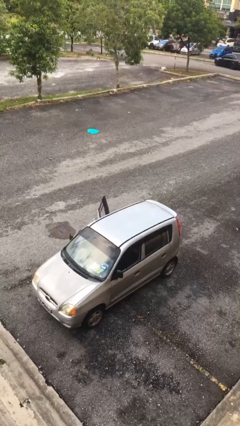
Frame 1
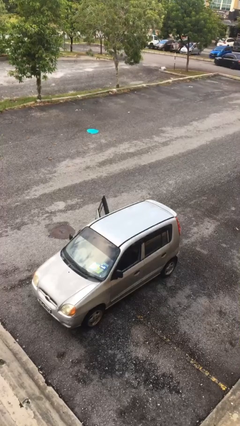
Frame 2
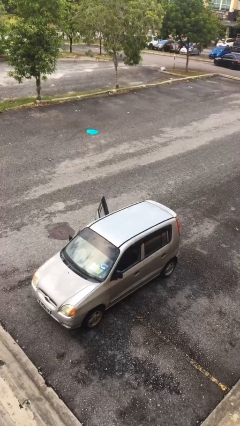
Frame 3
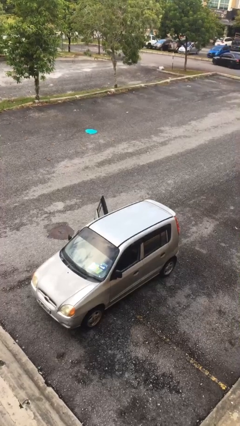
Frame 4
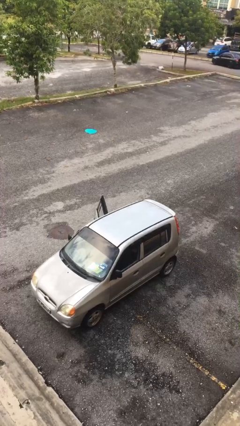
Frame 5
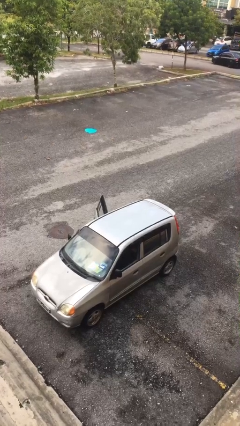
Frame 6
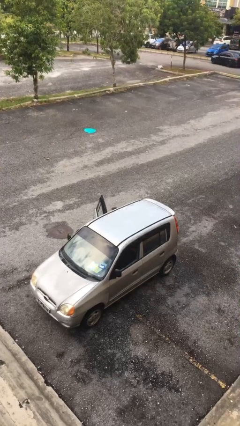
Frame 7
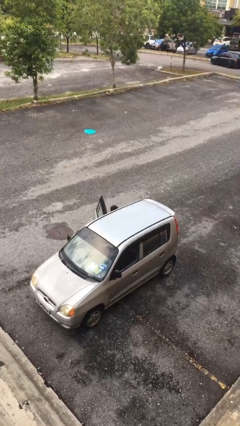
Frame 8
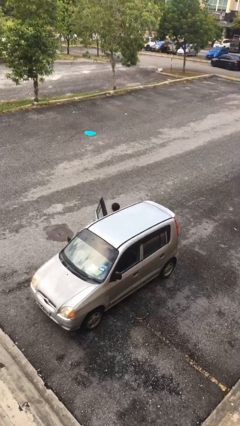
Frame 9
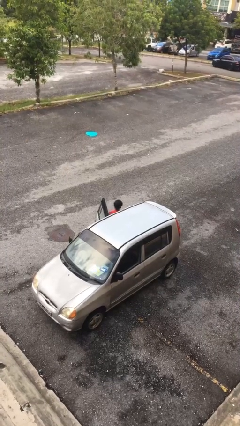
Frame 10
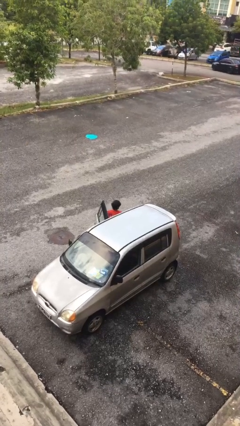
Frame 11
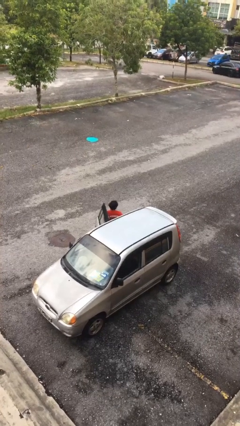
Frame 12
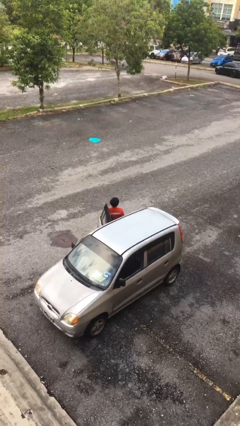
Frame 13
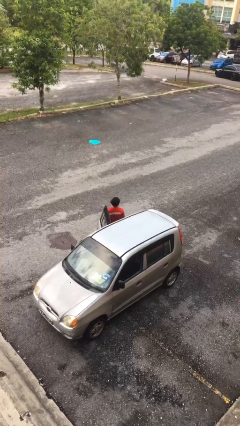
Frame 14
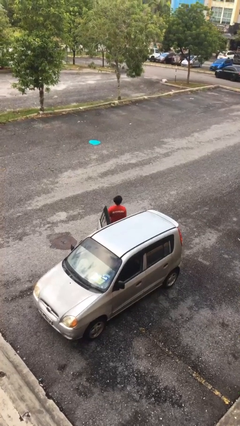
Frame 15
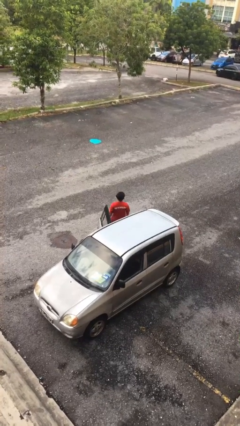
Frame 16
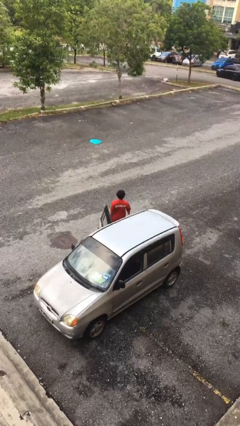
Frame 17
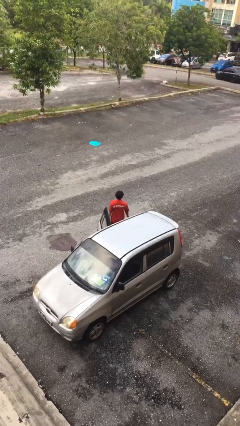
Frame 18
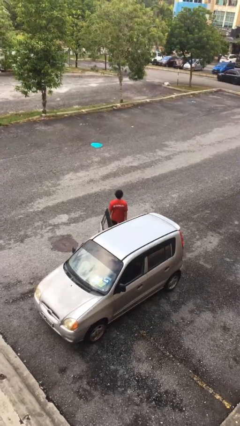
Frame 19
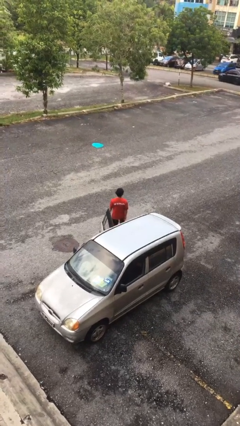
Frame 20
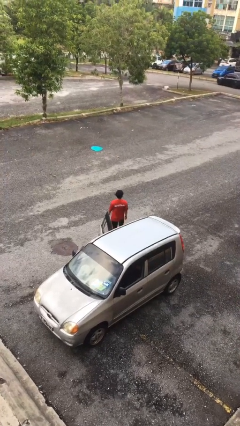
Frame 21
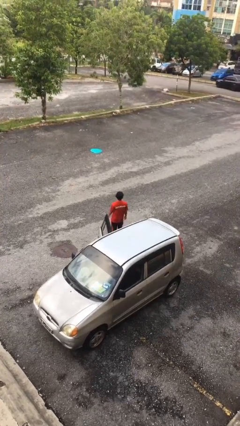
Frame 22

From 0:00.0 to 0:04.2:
person exits car

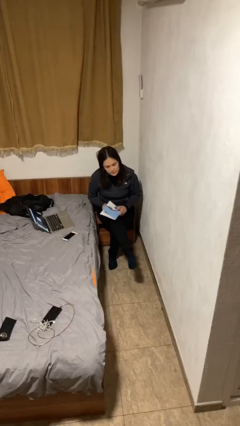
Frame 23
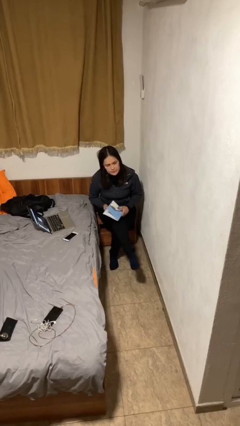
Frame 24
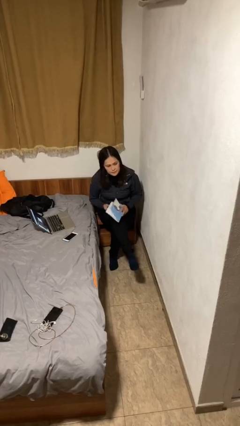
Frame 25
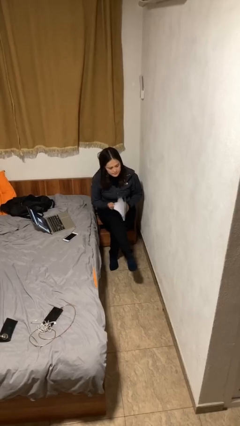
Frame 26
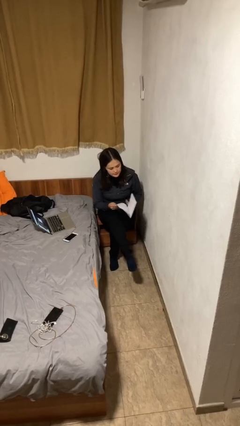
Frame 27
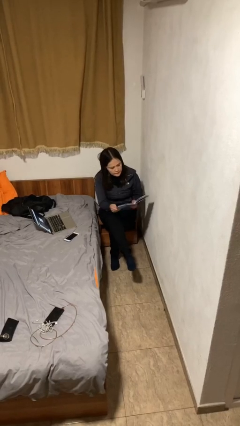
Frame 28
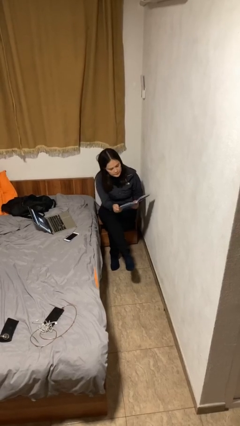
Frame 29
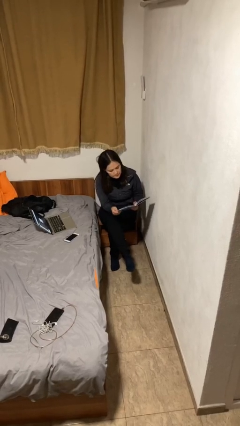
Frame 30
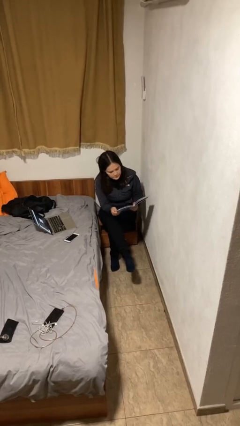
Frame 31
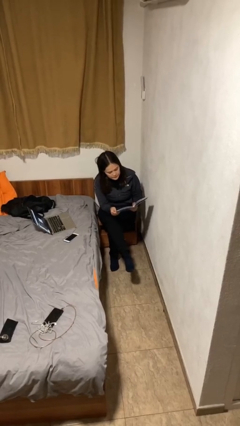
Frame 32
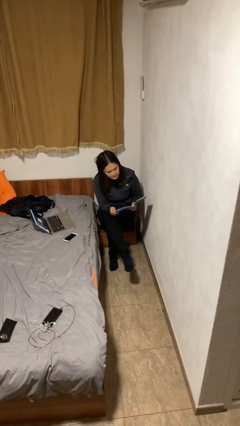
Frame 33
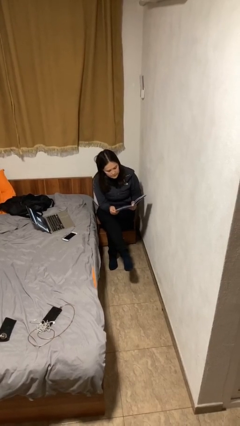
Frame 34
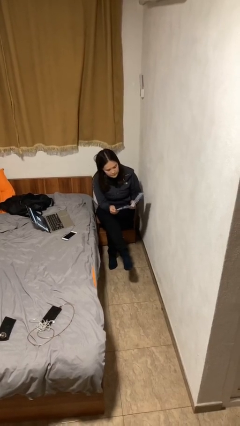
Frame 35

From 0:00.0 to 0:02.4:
person reads document

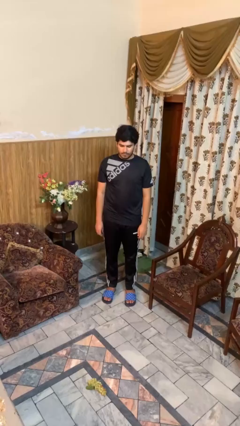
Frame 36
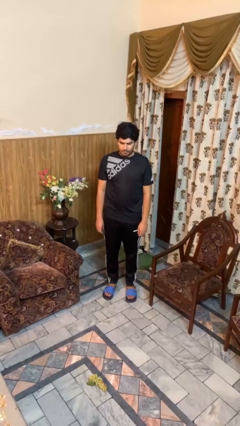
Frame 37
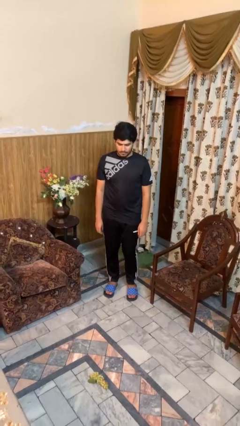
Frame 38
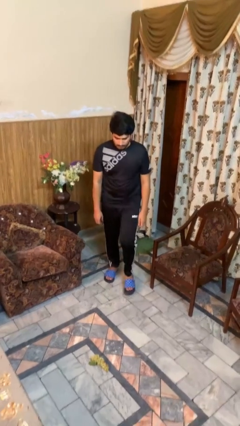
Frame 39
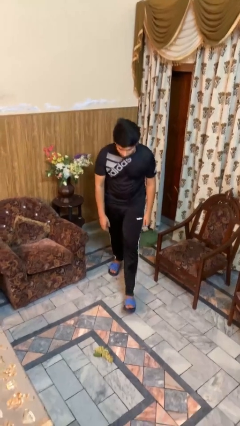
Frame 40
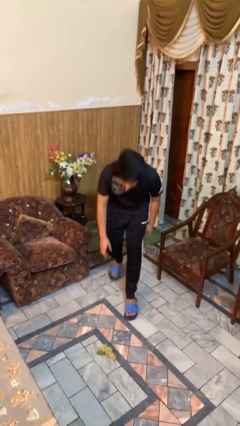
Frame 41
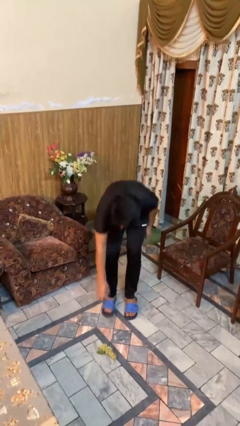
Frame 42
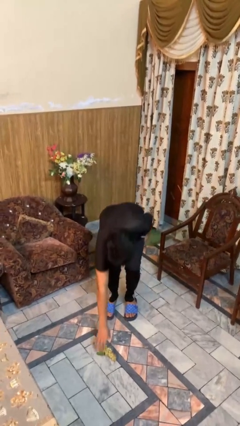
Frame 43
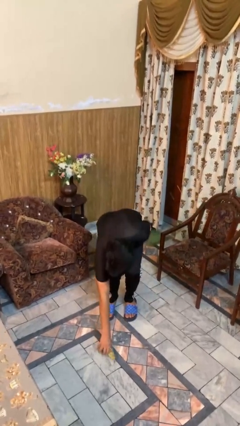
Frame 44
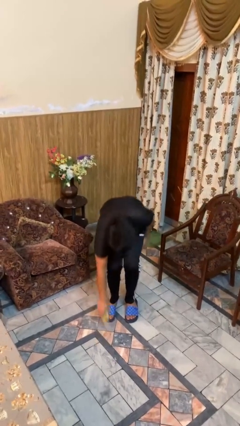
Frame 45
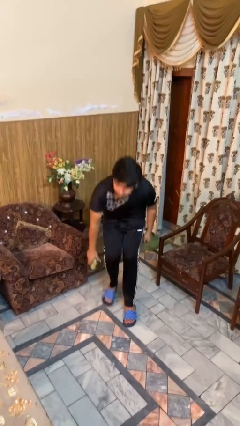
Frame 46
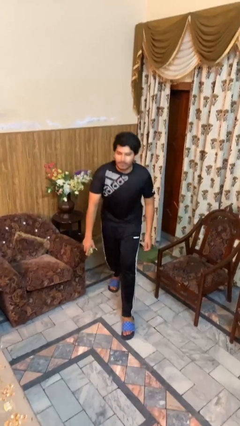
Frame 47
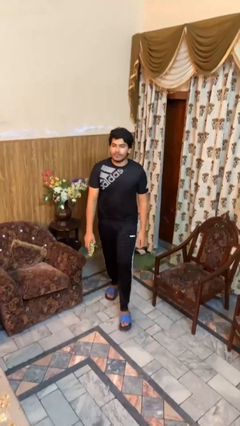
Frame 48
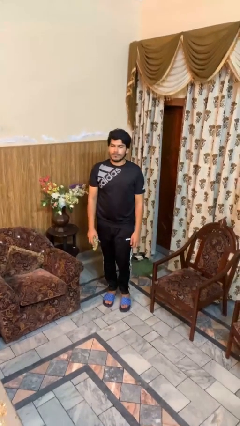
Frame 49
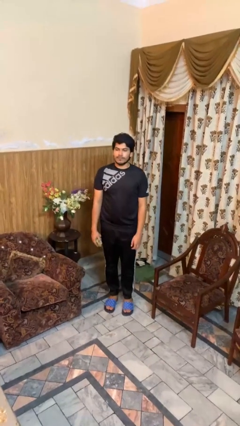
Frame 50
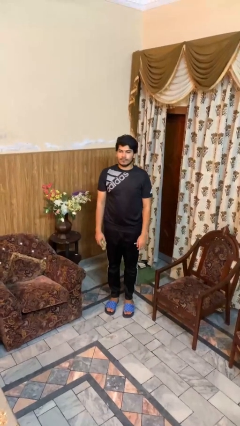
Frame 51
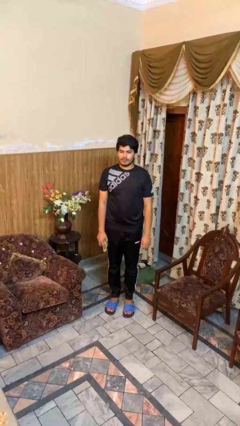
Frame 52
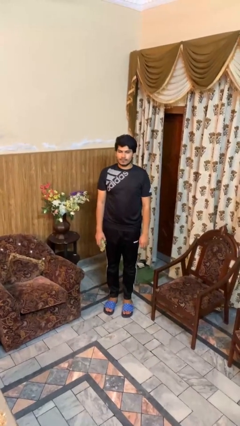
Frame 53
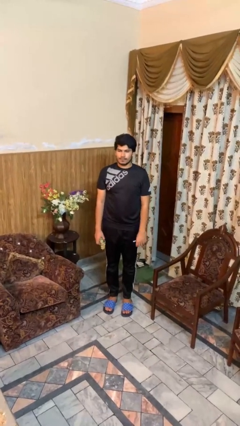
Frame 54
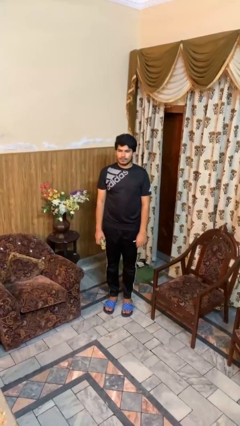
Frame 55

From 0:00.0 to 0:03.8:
person picks up object from floor

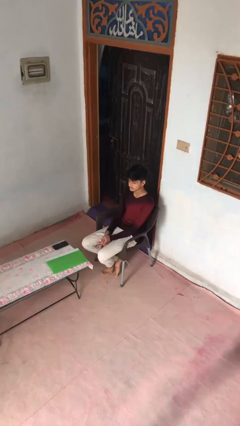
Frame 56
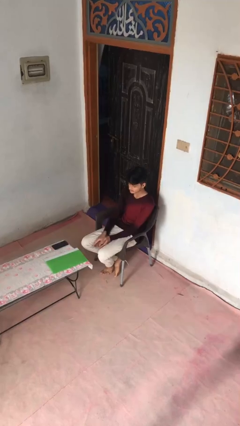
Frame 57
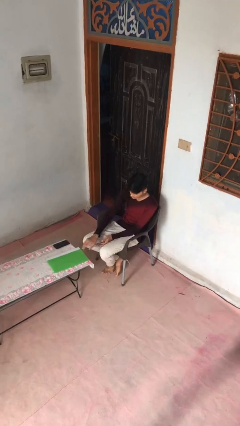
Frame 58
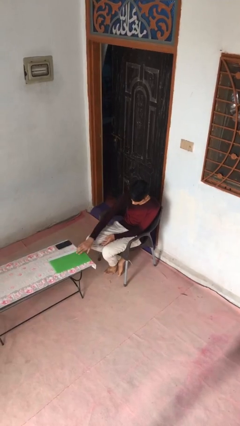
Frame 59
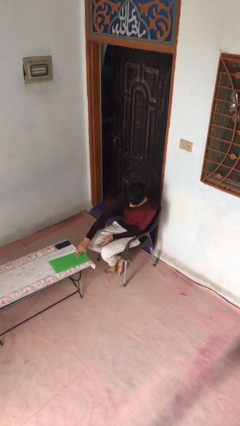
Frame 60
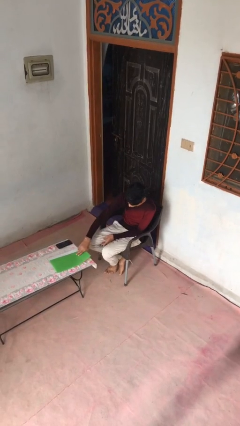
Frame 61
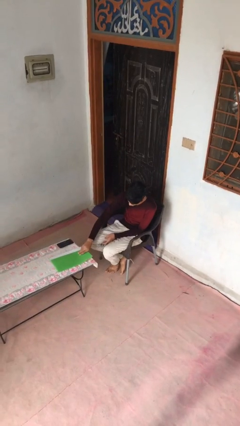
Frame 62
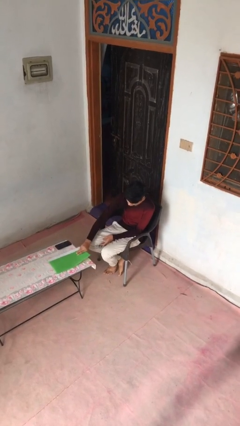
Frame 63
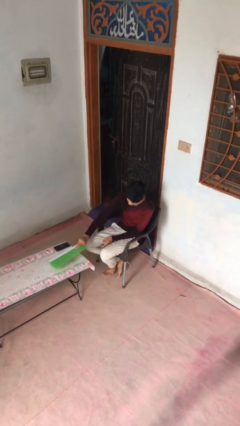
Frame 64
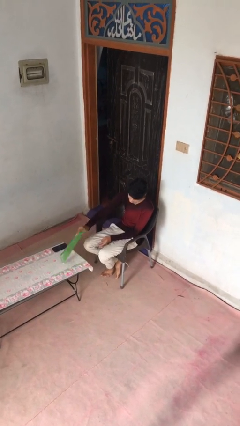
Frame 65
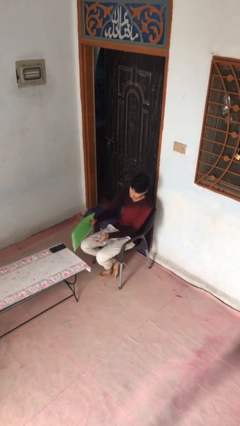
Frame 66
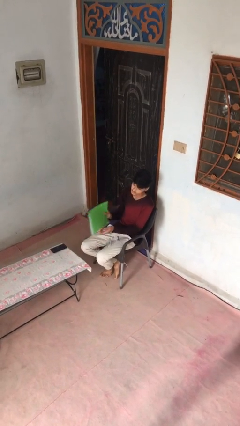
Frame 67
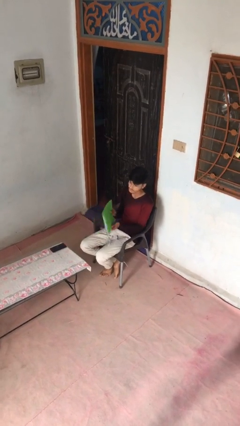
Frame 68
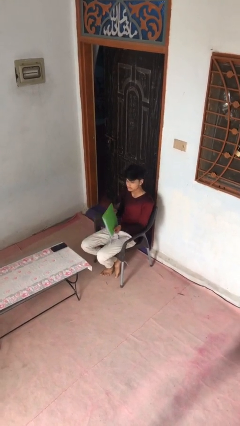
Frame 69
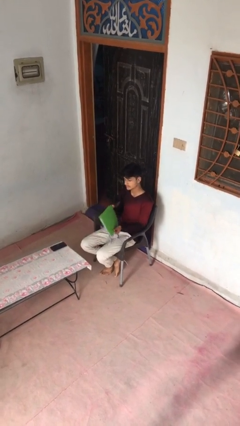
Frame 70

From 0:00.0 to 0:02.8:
person picks up object from table

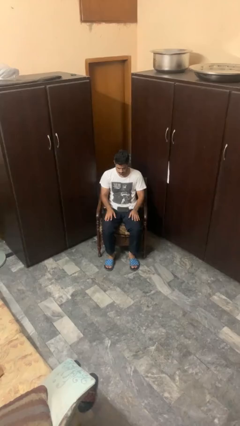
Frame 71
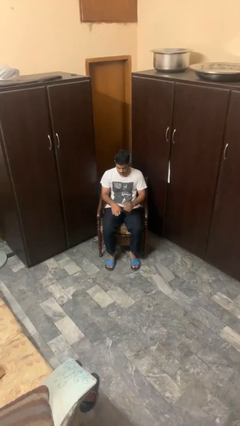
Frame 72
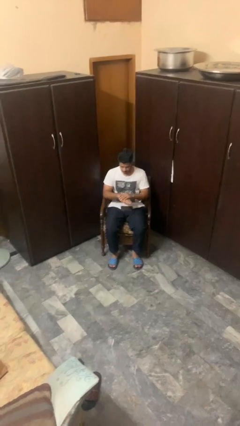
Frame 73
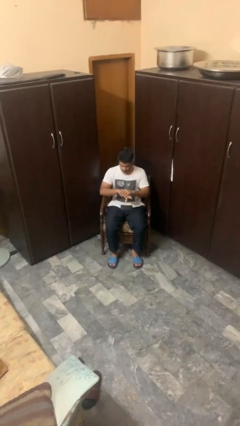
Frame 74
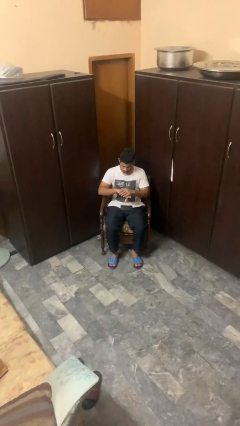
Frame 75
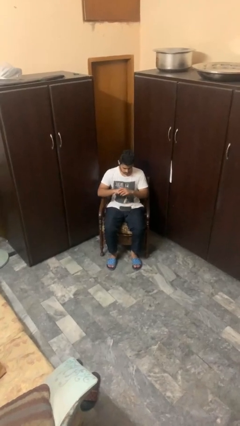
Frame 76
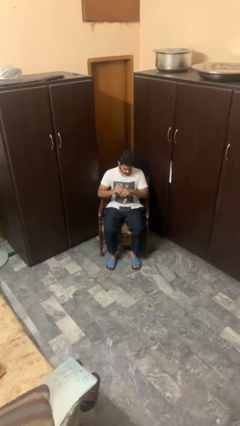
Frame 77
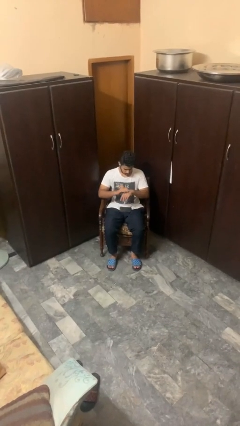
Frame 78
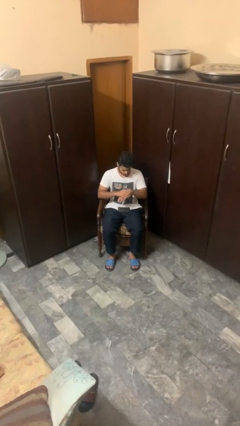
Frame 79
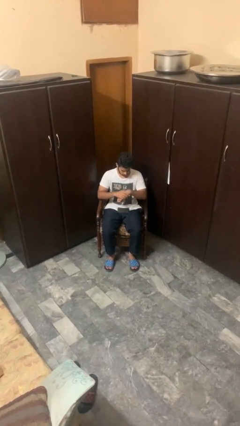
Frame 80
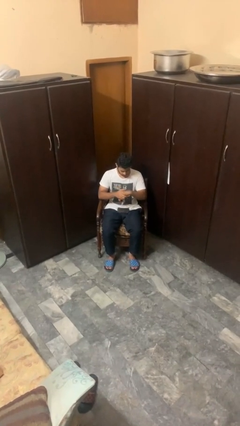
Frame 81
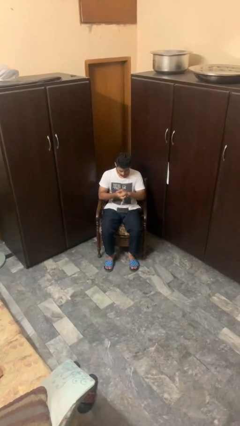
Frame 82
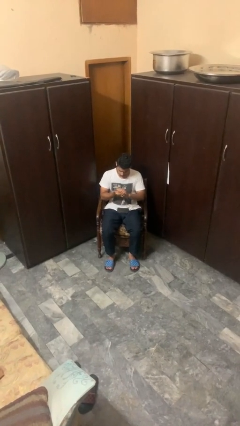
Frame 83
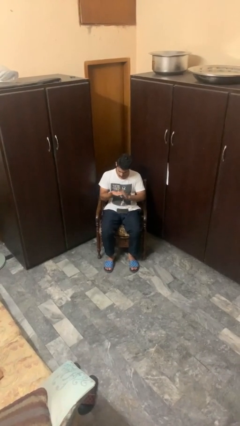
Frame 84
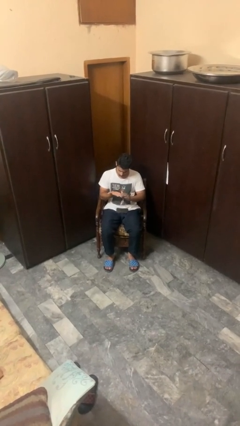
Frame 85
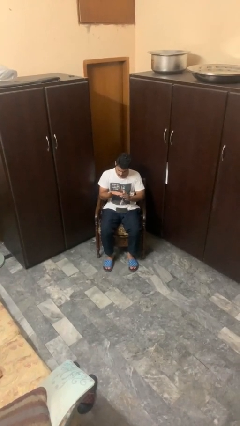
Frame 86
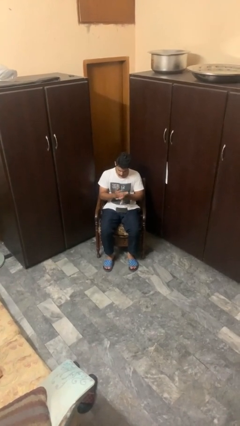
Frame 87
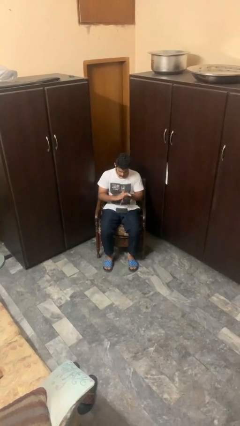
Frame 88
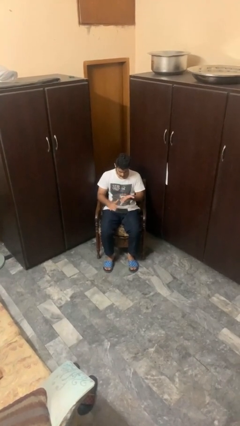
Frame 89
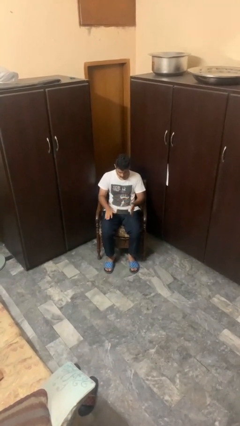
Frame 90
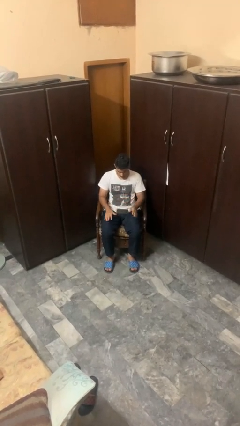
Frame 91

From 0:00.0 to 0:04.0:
person looks at hands in lap
